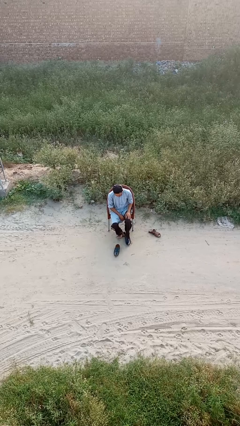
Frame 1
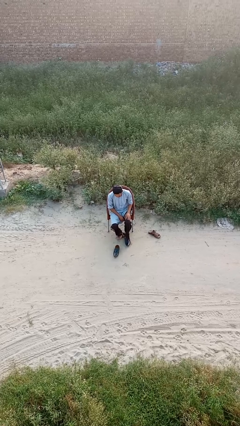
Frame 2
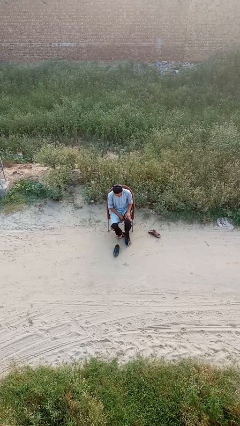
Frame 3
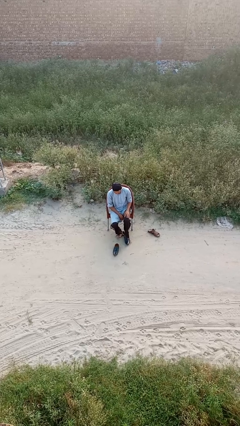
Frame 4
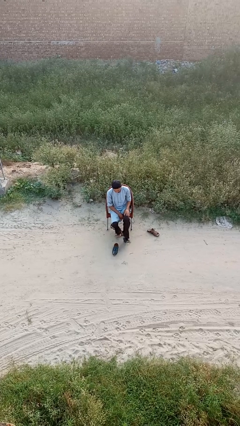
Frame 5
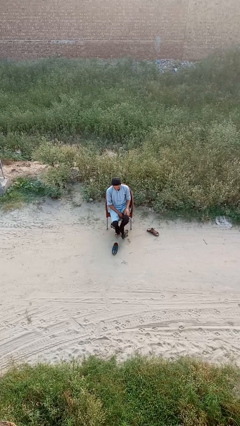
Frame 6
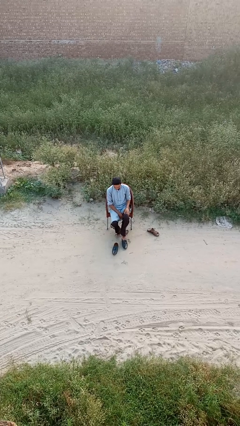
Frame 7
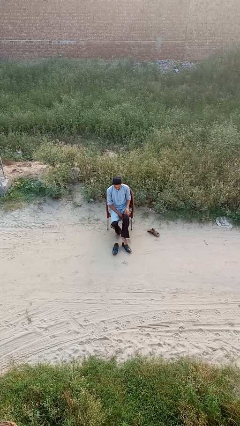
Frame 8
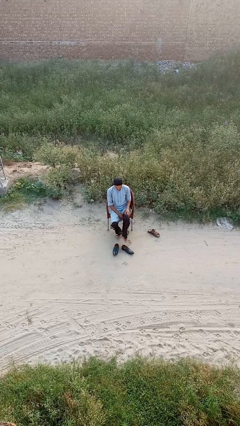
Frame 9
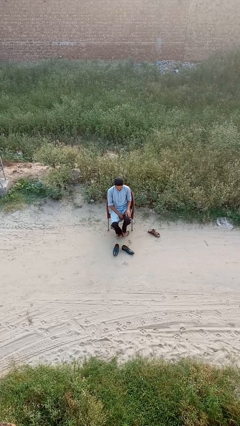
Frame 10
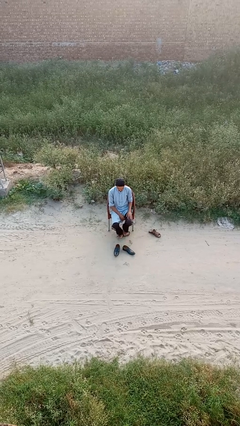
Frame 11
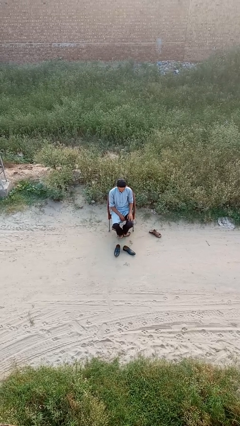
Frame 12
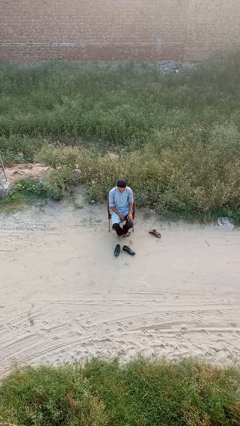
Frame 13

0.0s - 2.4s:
person takes off shoes

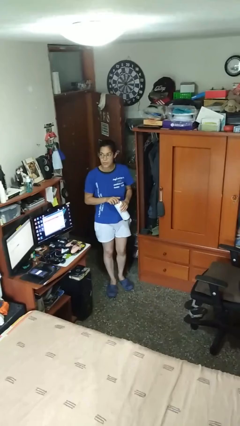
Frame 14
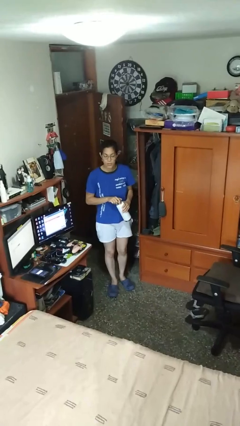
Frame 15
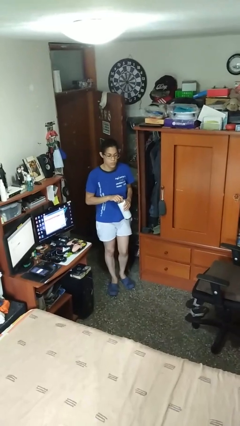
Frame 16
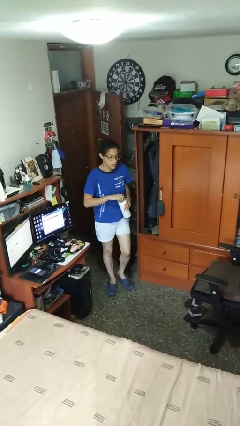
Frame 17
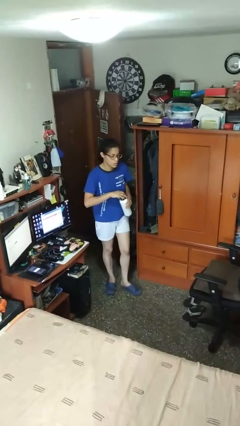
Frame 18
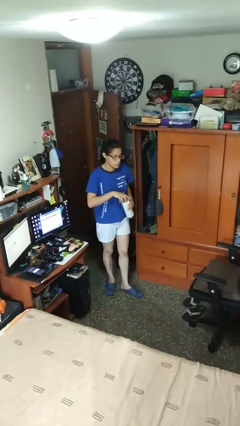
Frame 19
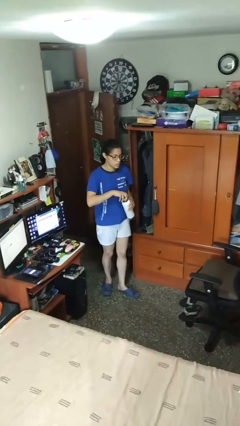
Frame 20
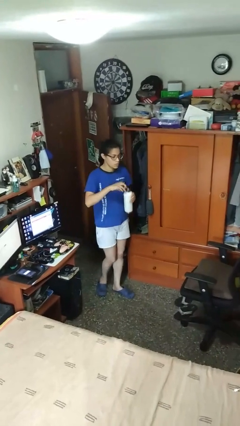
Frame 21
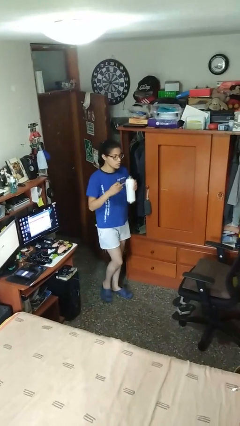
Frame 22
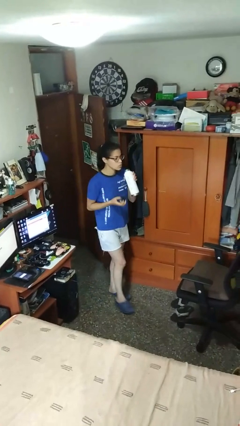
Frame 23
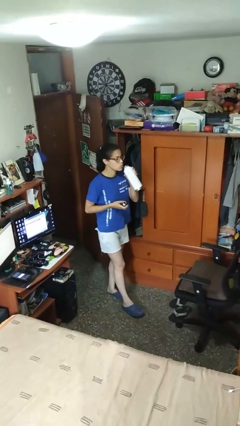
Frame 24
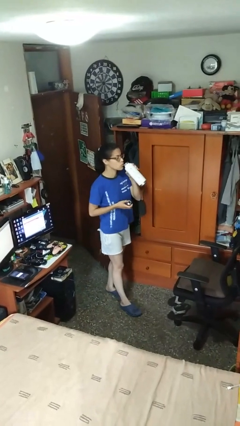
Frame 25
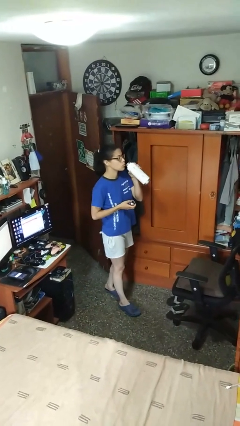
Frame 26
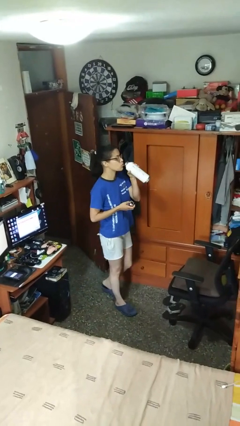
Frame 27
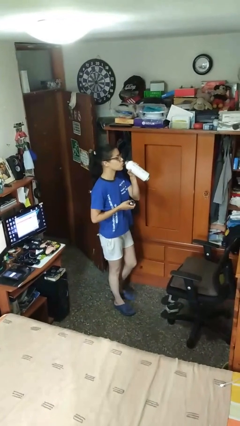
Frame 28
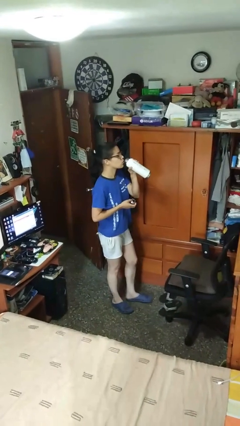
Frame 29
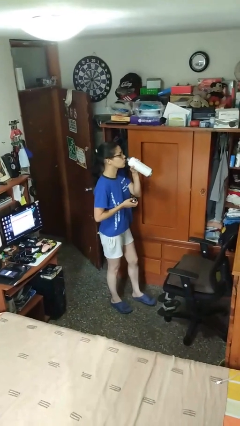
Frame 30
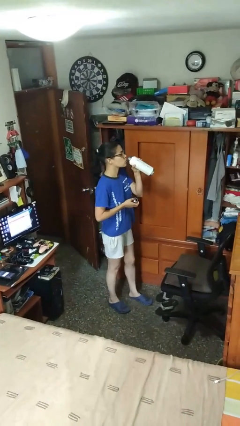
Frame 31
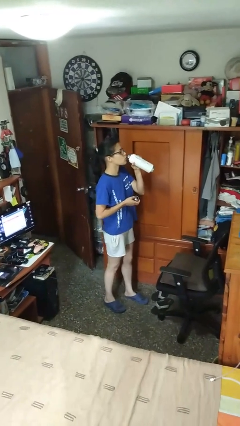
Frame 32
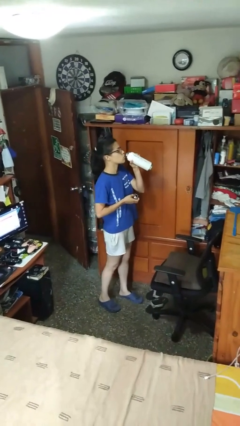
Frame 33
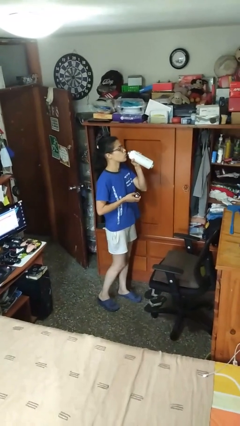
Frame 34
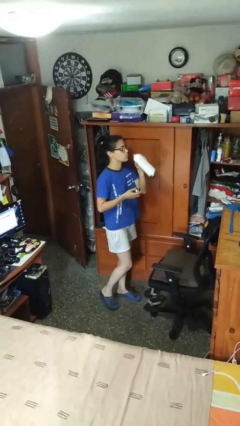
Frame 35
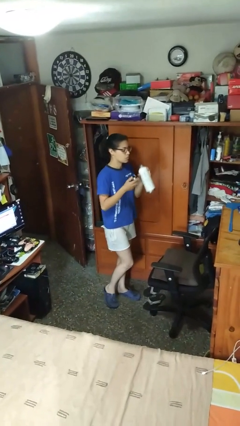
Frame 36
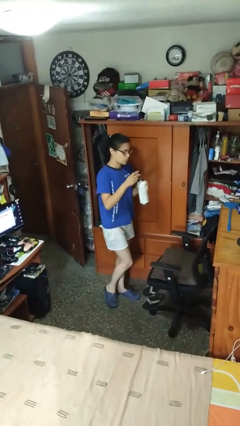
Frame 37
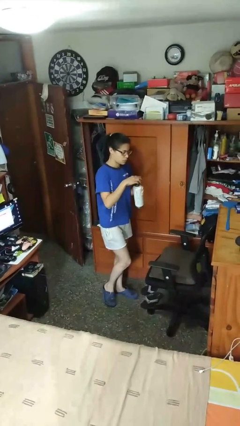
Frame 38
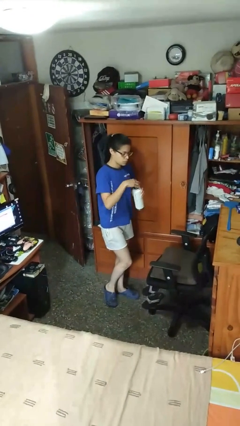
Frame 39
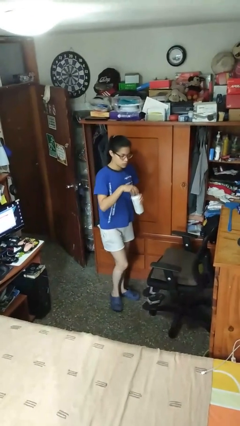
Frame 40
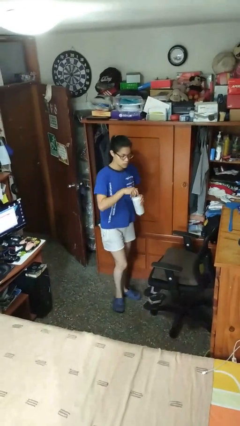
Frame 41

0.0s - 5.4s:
person drinks from bottle

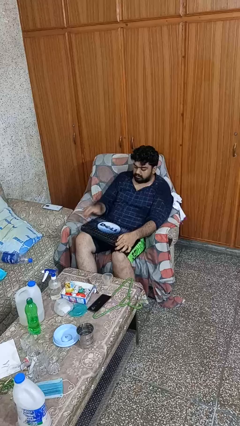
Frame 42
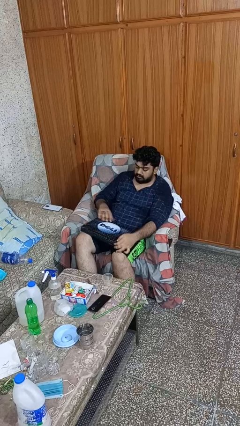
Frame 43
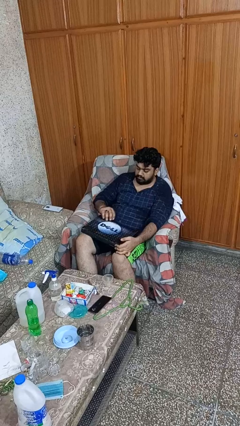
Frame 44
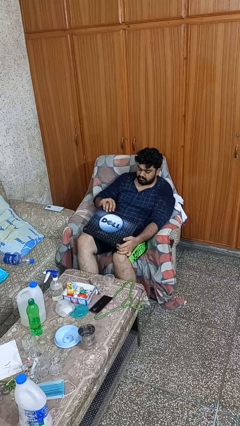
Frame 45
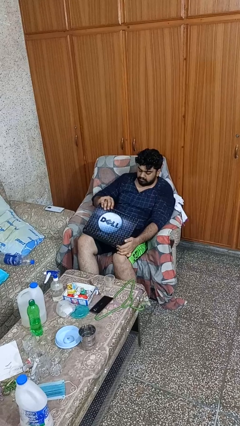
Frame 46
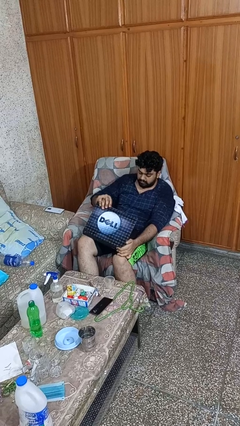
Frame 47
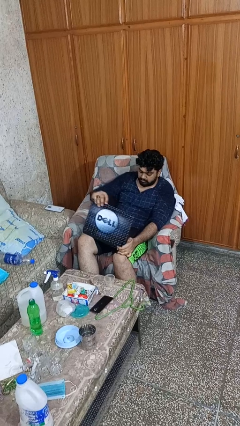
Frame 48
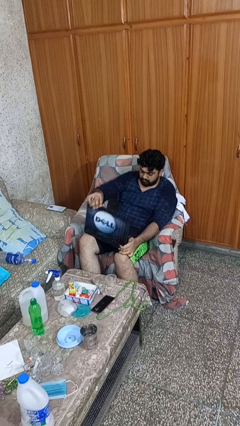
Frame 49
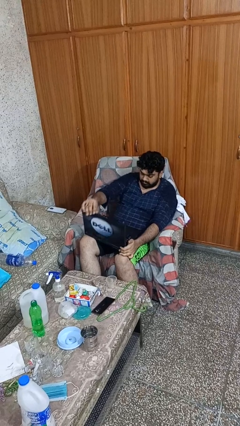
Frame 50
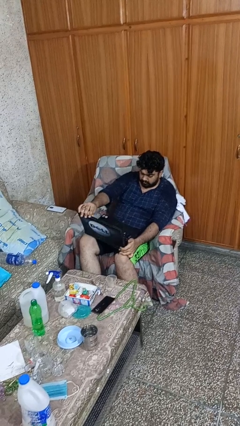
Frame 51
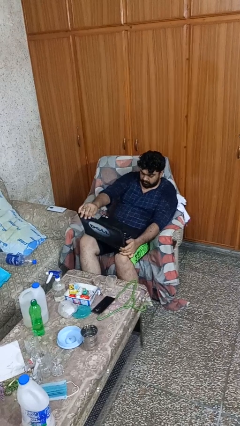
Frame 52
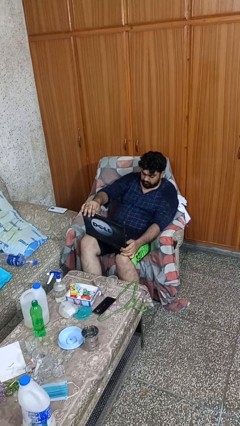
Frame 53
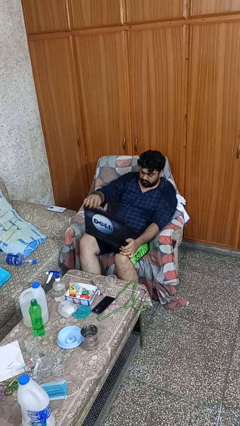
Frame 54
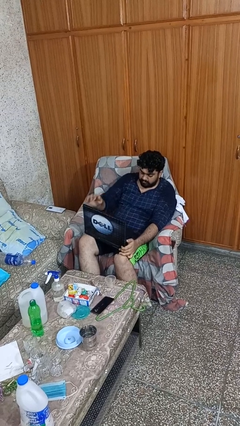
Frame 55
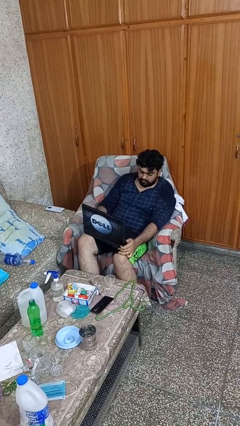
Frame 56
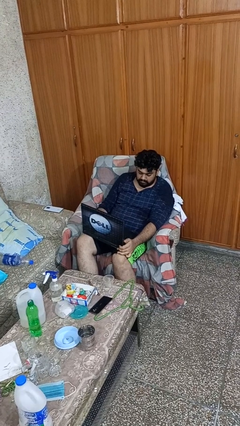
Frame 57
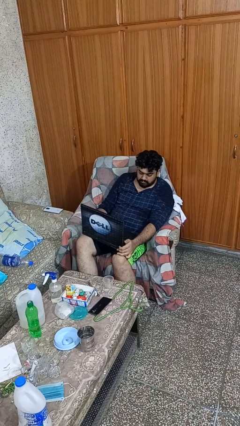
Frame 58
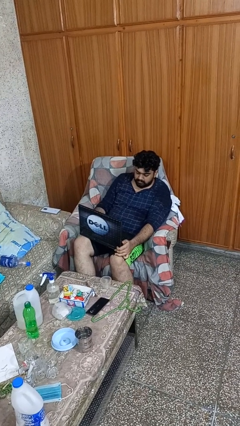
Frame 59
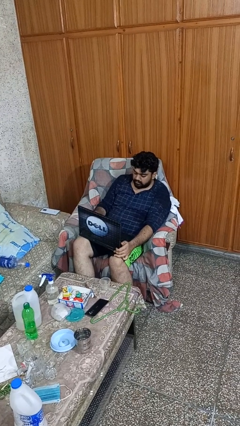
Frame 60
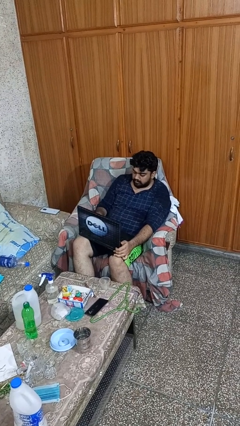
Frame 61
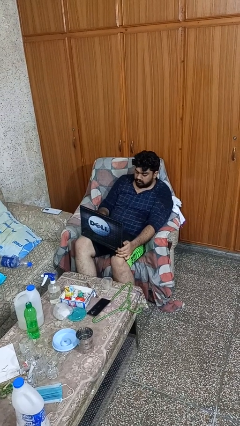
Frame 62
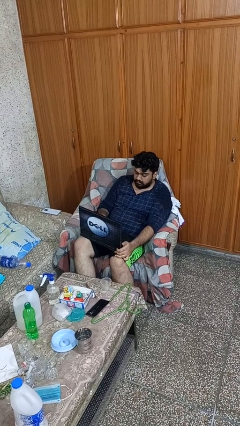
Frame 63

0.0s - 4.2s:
person opens laptop

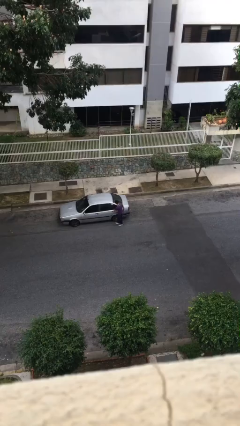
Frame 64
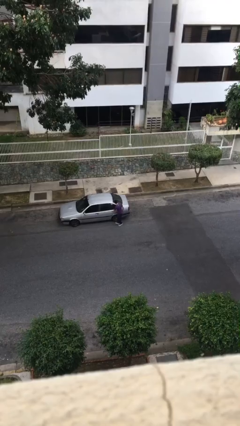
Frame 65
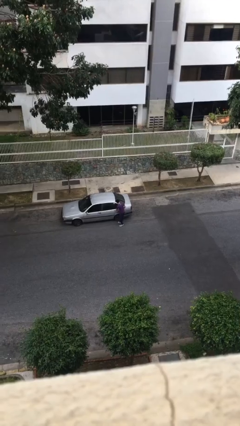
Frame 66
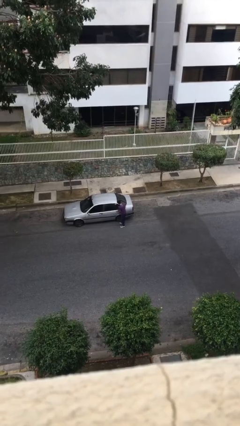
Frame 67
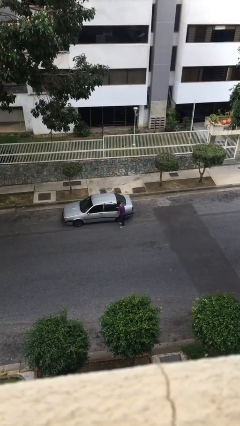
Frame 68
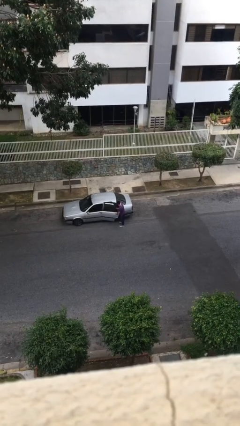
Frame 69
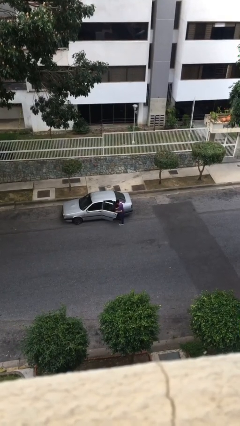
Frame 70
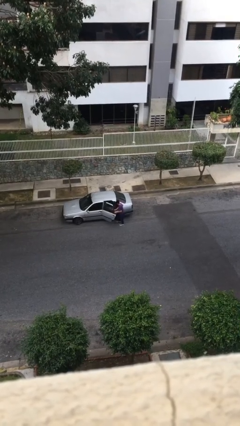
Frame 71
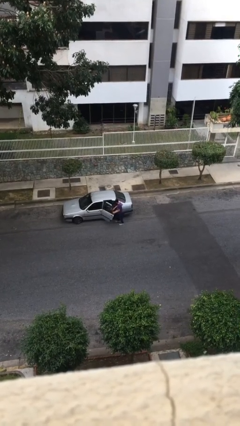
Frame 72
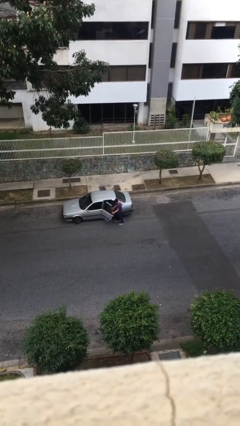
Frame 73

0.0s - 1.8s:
person opens car door

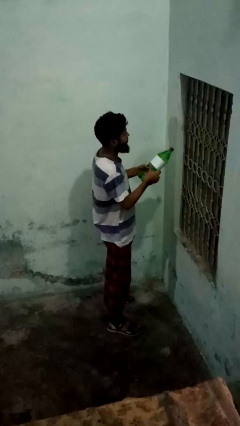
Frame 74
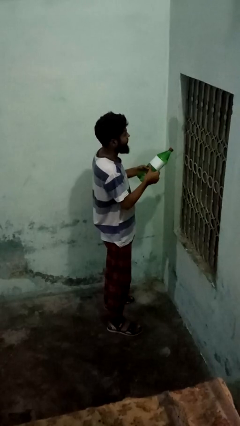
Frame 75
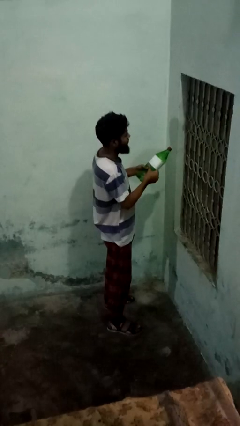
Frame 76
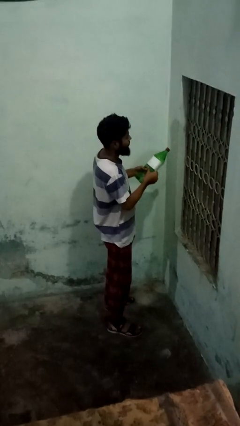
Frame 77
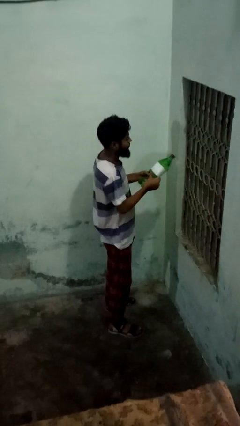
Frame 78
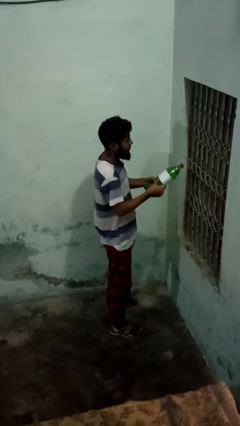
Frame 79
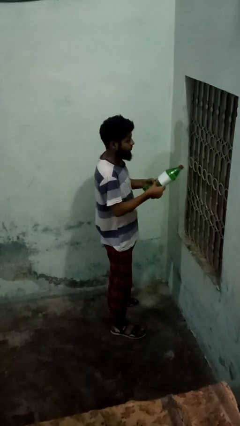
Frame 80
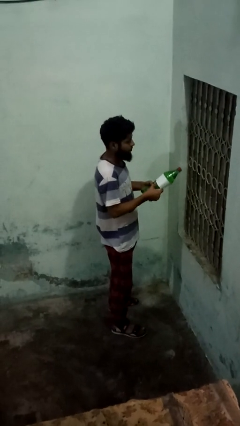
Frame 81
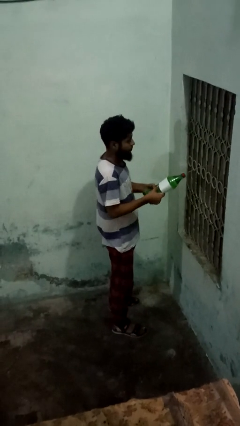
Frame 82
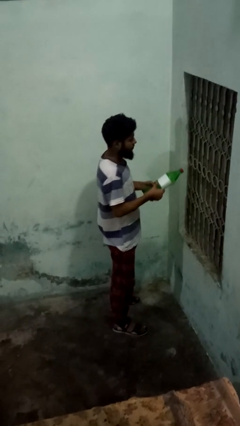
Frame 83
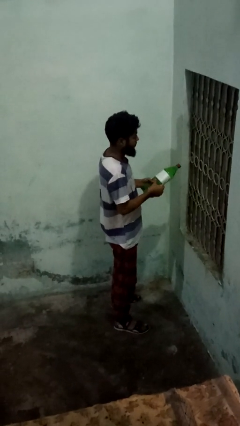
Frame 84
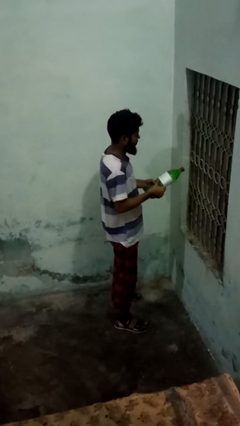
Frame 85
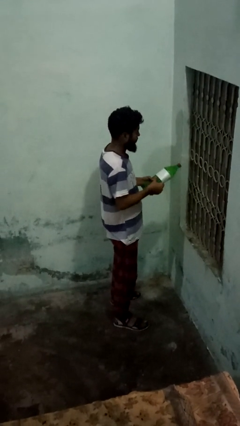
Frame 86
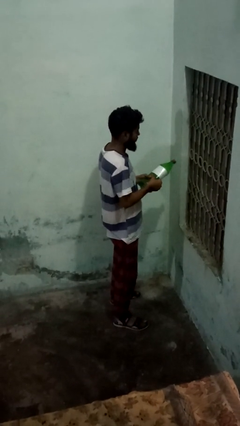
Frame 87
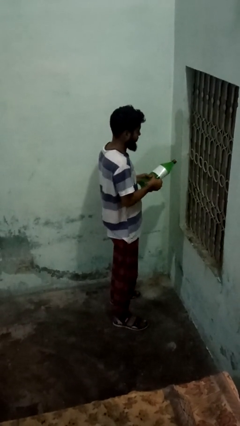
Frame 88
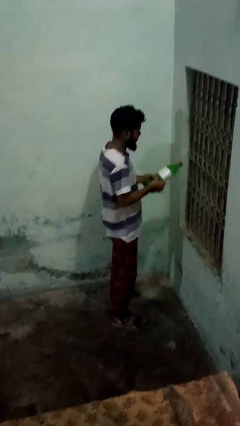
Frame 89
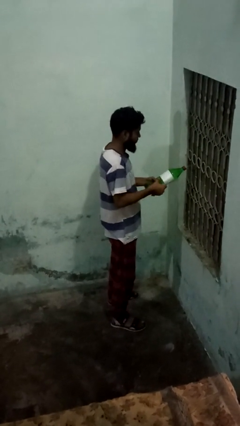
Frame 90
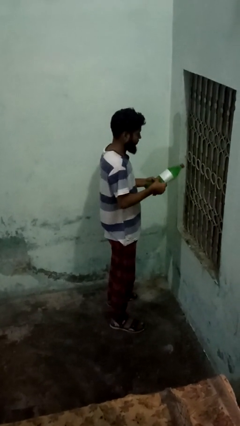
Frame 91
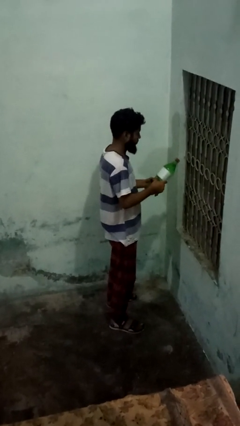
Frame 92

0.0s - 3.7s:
person sprays from bottle
